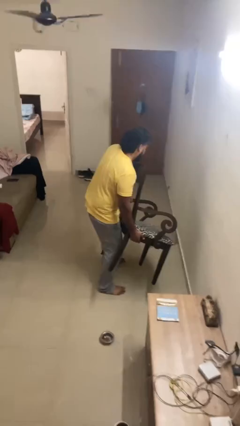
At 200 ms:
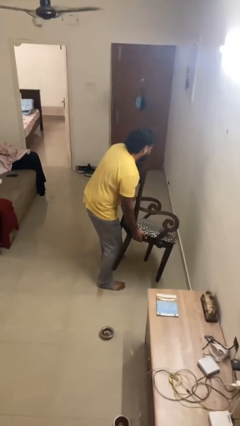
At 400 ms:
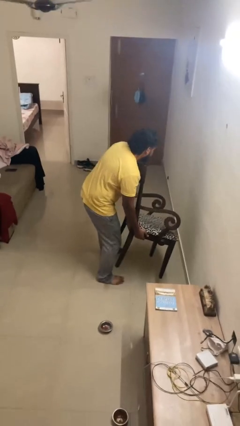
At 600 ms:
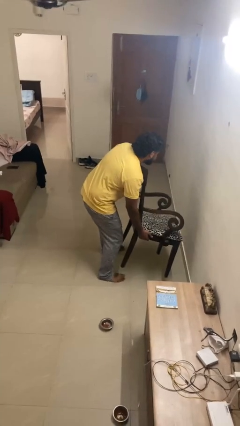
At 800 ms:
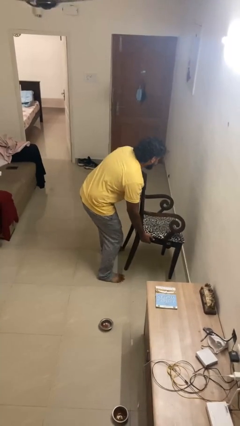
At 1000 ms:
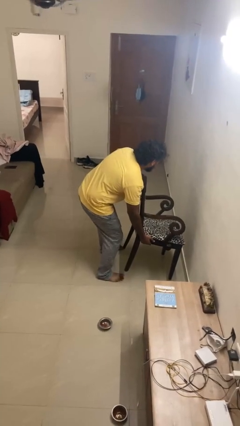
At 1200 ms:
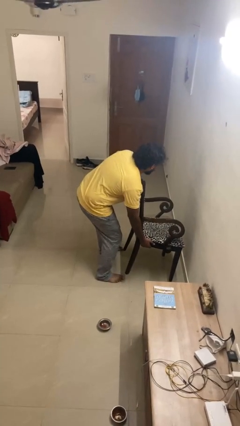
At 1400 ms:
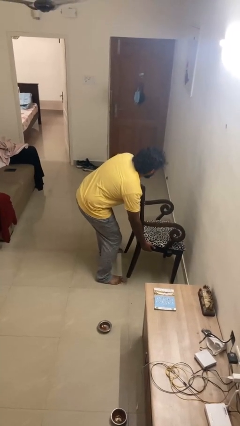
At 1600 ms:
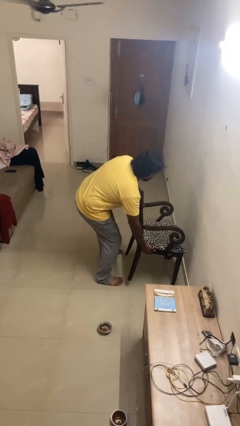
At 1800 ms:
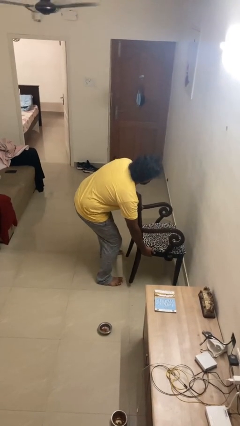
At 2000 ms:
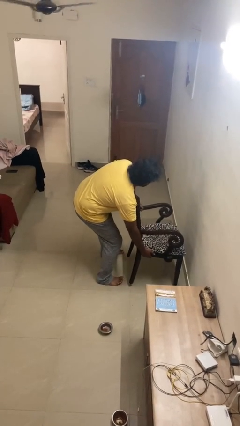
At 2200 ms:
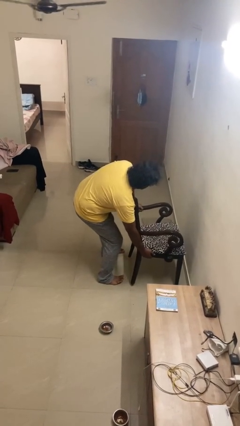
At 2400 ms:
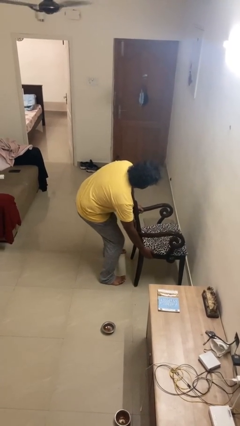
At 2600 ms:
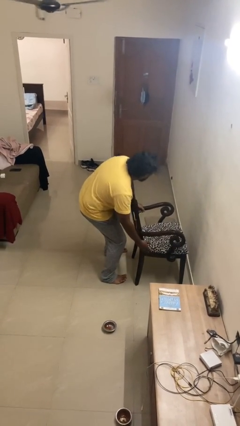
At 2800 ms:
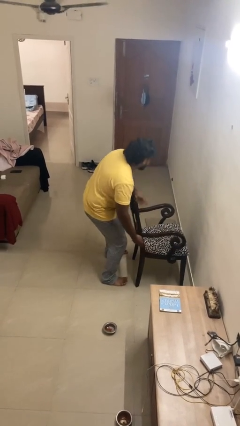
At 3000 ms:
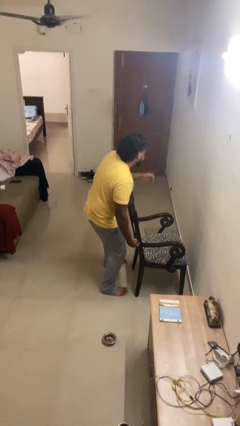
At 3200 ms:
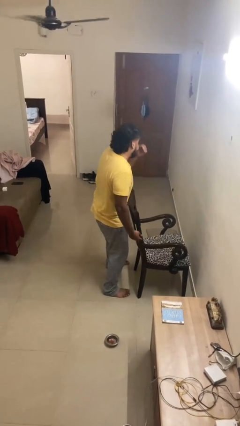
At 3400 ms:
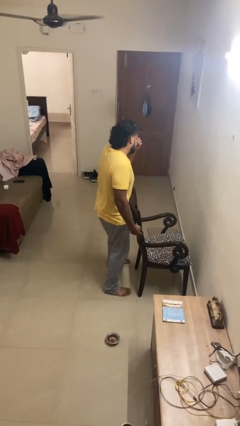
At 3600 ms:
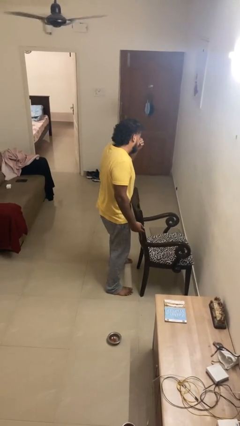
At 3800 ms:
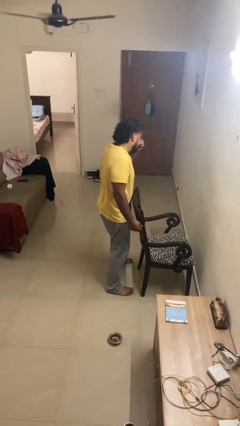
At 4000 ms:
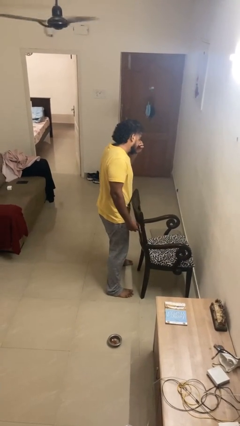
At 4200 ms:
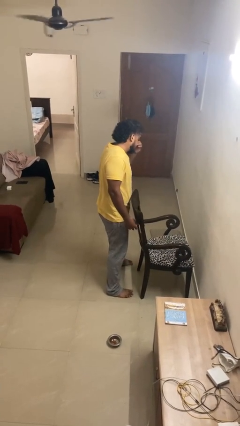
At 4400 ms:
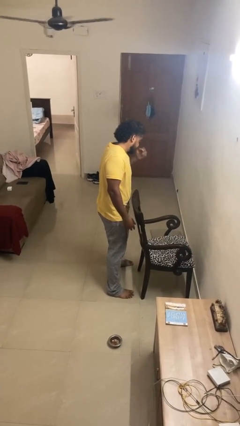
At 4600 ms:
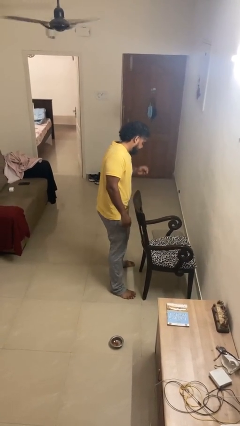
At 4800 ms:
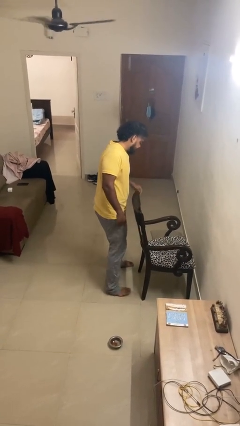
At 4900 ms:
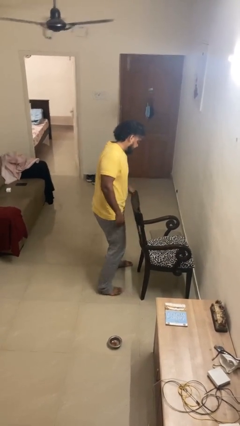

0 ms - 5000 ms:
person puts down object on floor

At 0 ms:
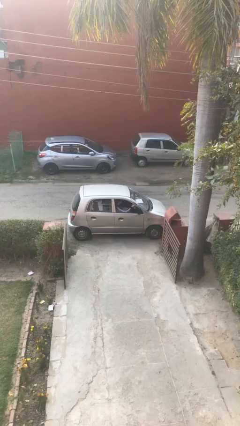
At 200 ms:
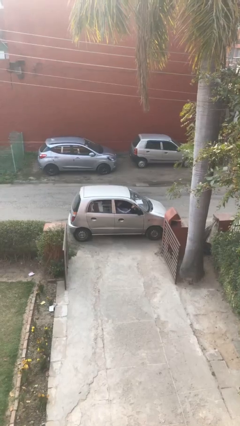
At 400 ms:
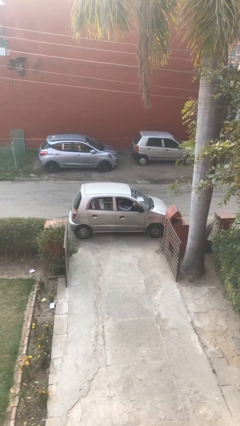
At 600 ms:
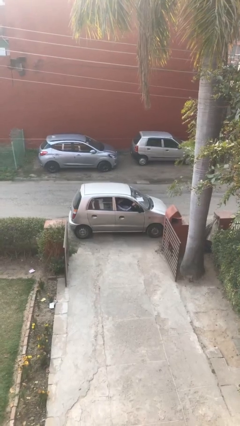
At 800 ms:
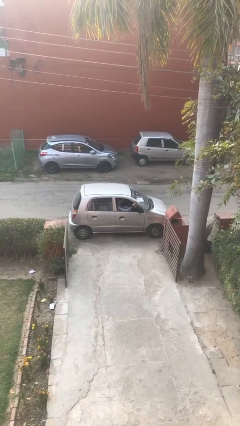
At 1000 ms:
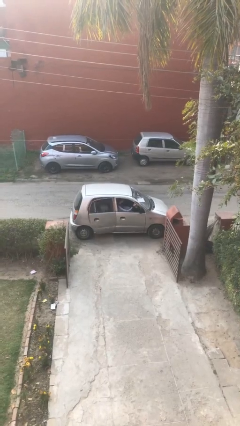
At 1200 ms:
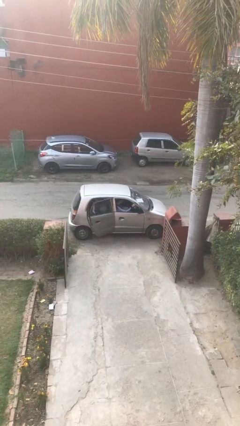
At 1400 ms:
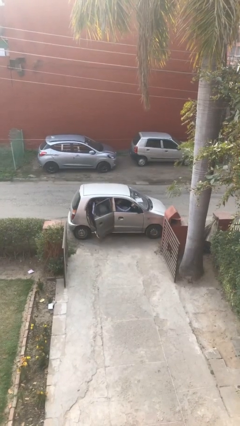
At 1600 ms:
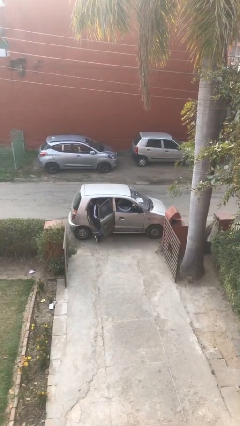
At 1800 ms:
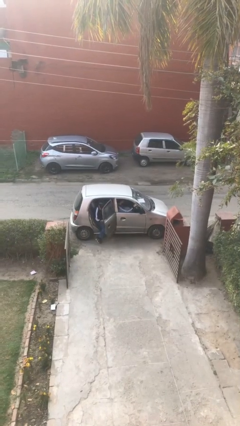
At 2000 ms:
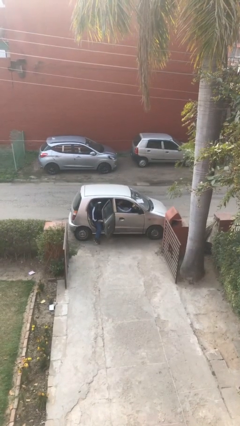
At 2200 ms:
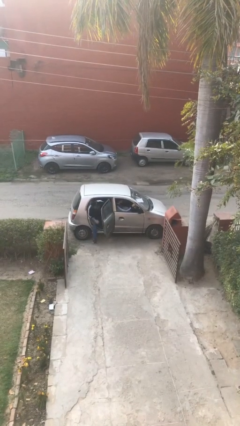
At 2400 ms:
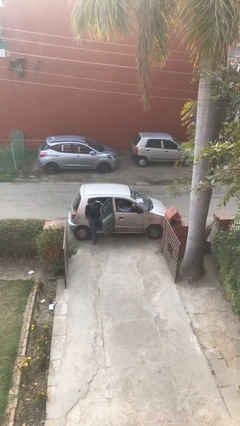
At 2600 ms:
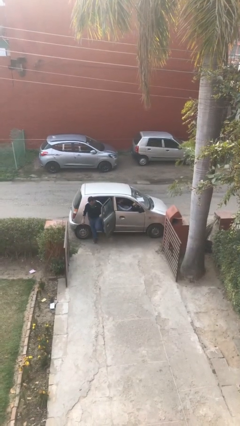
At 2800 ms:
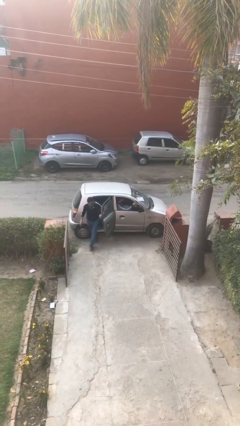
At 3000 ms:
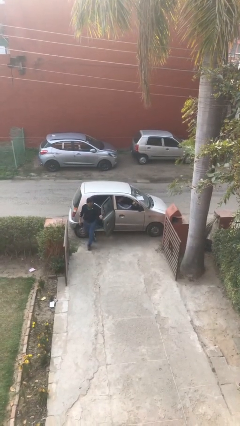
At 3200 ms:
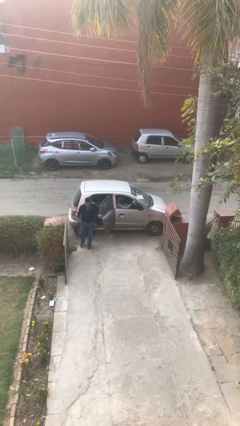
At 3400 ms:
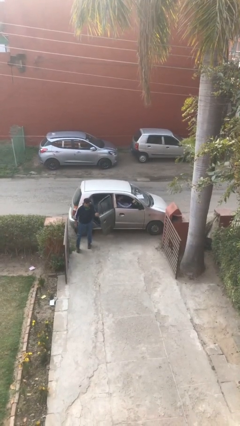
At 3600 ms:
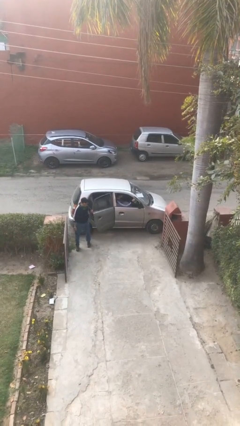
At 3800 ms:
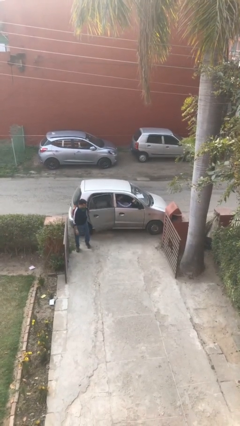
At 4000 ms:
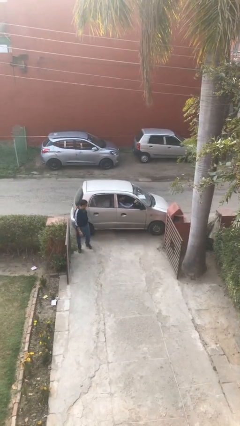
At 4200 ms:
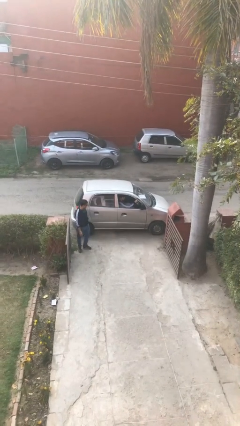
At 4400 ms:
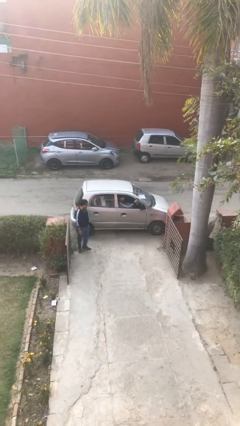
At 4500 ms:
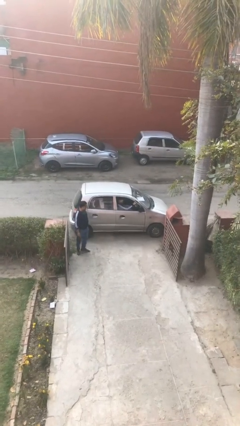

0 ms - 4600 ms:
car drops off person

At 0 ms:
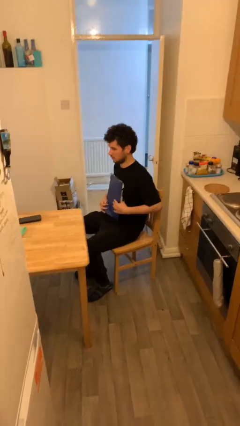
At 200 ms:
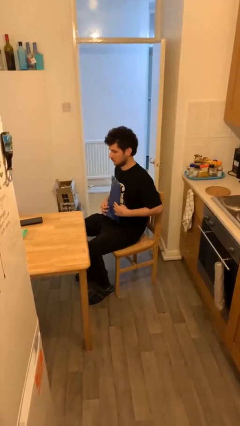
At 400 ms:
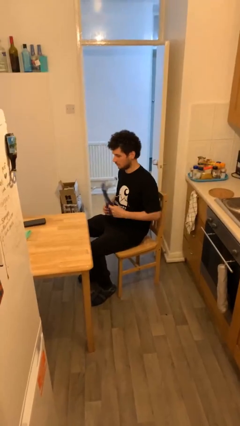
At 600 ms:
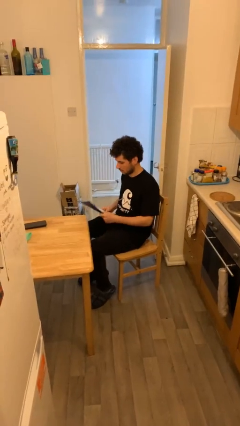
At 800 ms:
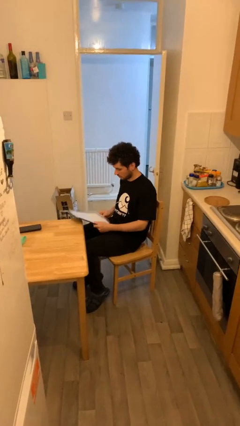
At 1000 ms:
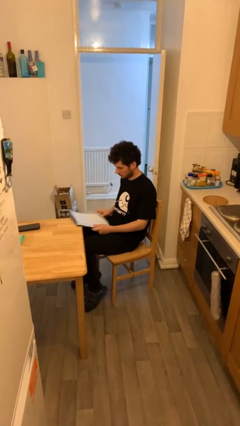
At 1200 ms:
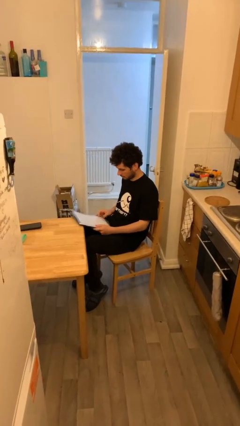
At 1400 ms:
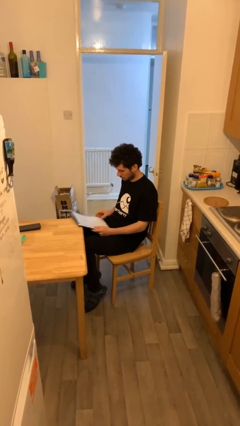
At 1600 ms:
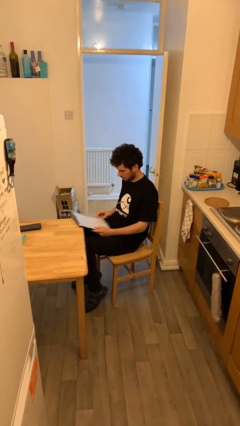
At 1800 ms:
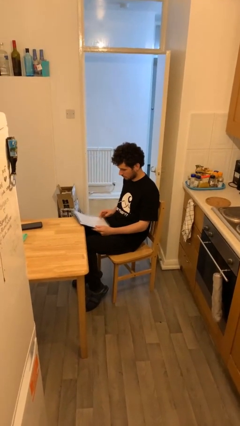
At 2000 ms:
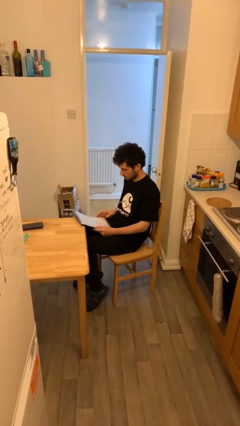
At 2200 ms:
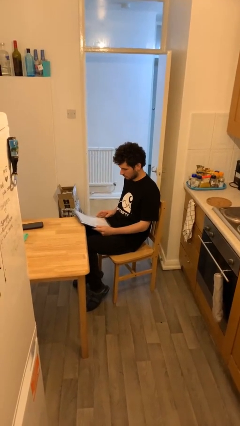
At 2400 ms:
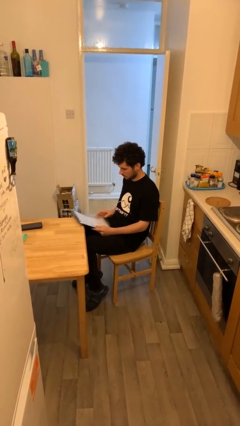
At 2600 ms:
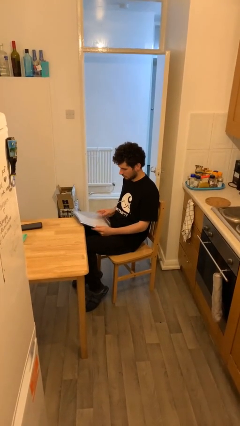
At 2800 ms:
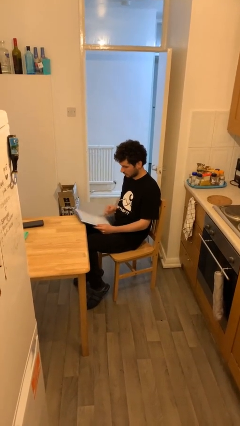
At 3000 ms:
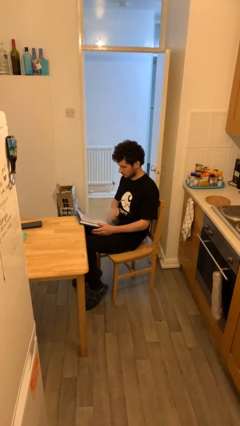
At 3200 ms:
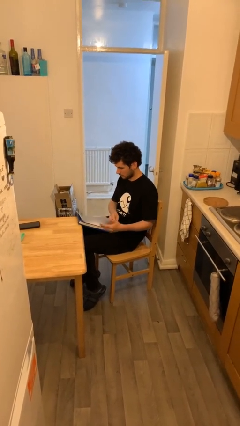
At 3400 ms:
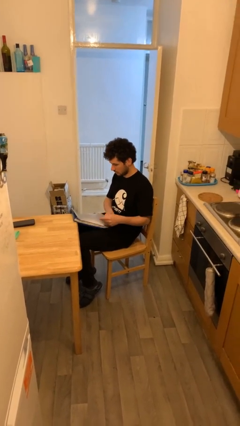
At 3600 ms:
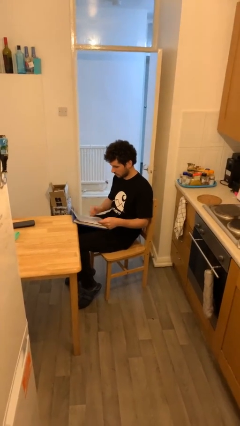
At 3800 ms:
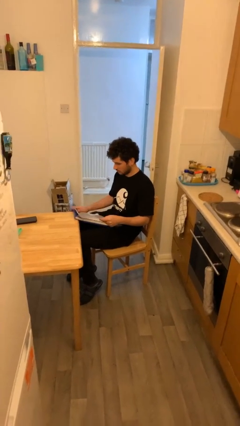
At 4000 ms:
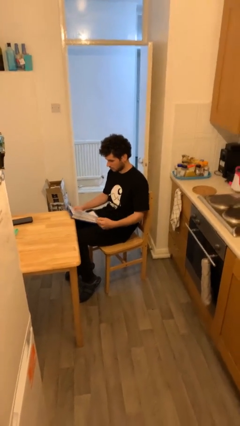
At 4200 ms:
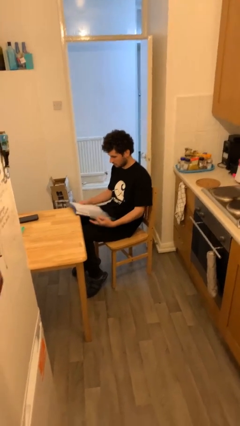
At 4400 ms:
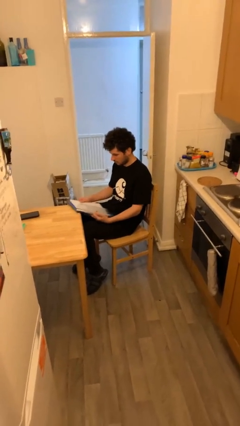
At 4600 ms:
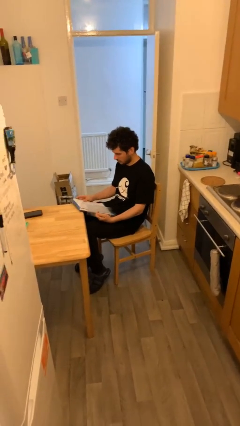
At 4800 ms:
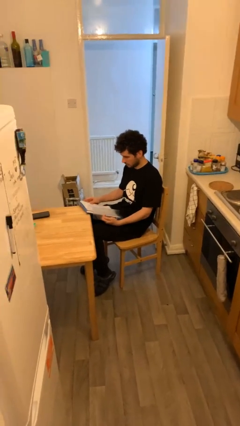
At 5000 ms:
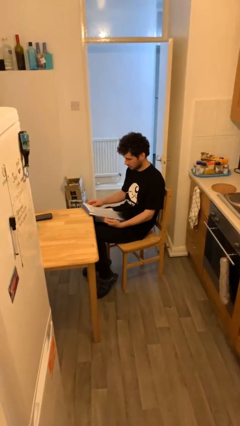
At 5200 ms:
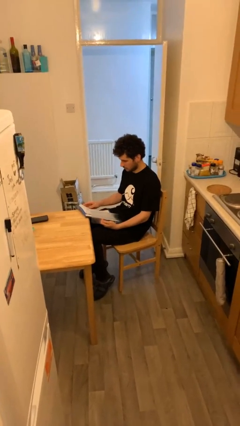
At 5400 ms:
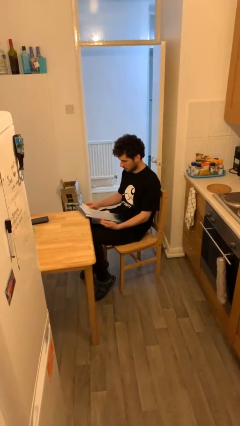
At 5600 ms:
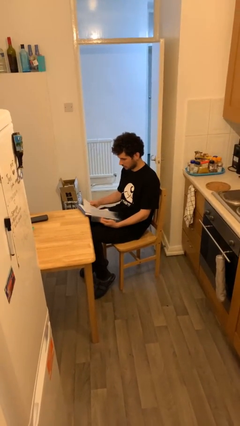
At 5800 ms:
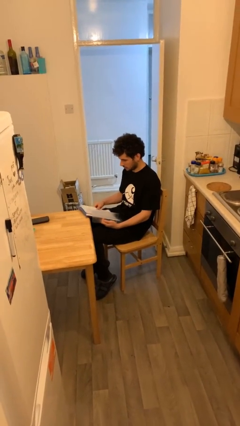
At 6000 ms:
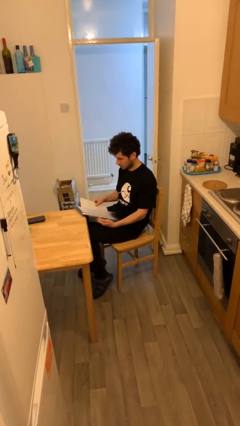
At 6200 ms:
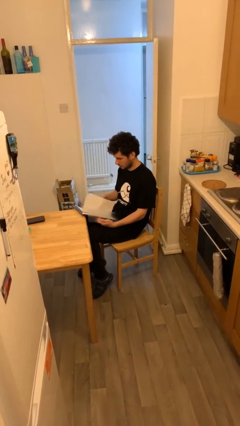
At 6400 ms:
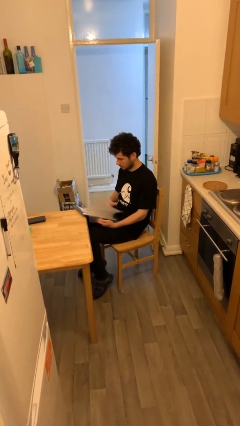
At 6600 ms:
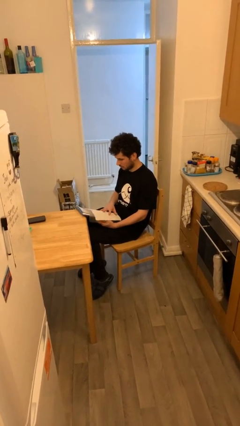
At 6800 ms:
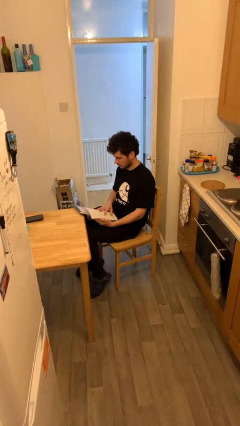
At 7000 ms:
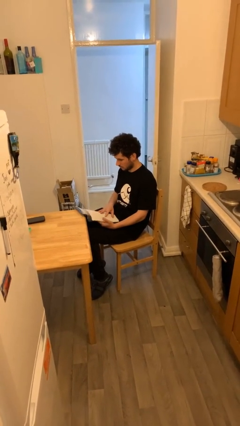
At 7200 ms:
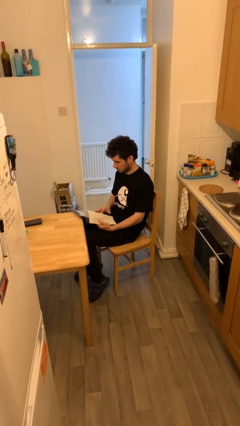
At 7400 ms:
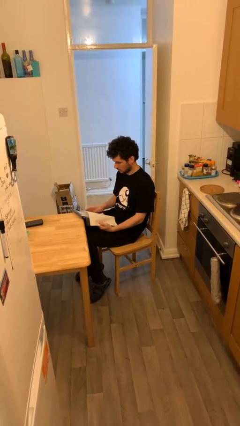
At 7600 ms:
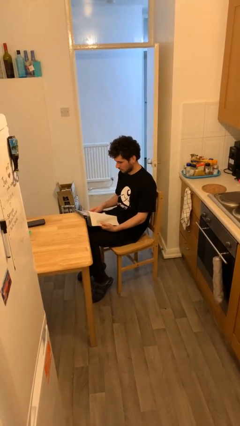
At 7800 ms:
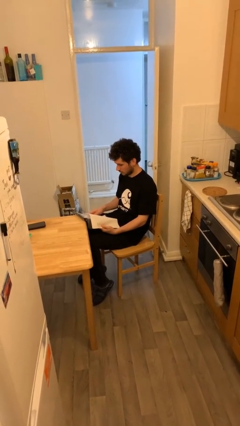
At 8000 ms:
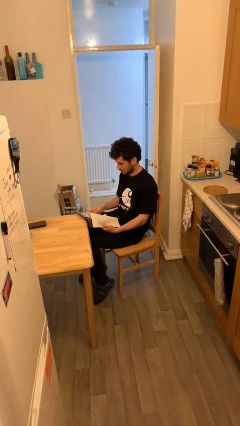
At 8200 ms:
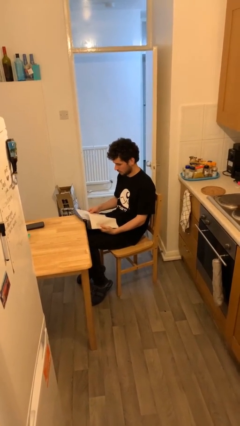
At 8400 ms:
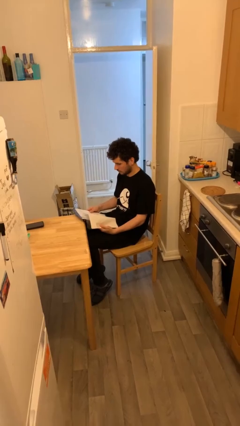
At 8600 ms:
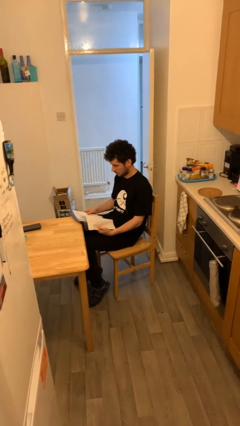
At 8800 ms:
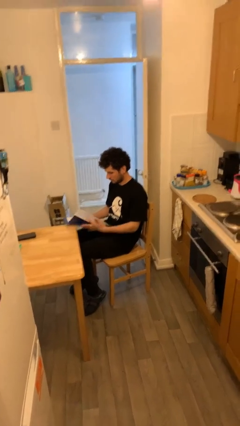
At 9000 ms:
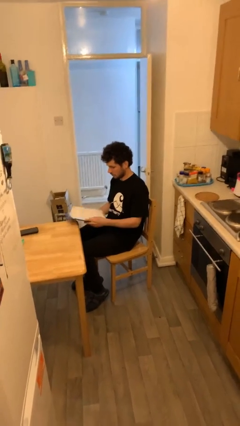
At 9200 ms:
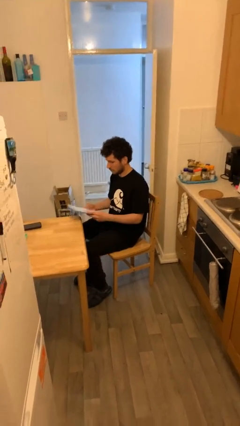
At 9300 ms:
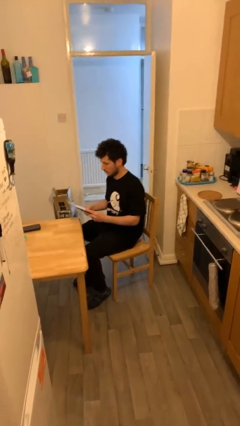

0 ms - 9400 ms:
person reads document
